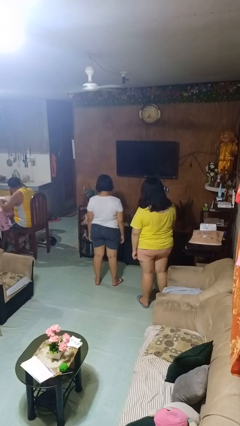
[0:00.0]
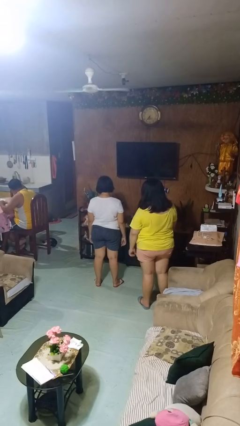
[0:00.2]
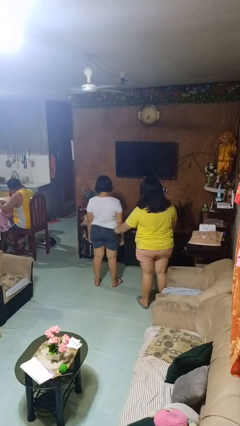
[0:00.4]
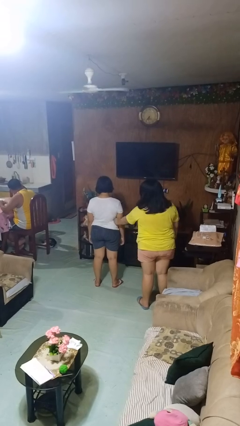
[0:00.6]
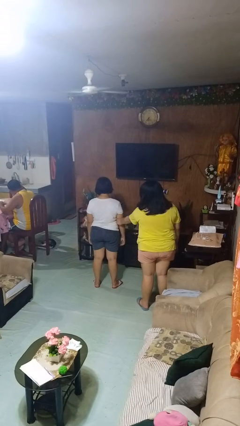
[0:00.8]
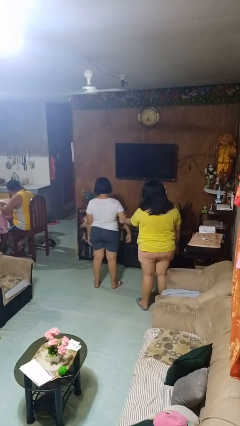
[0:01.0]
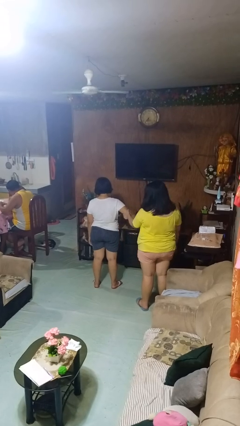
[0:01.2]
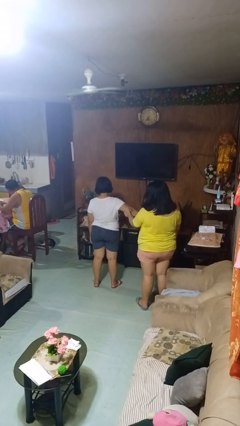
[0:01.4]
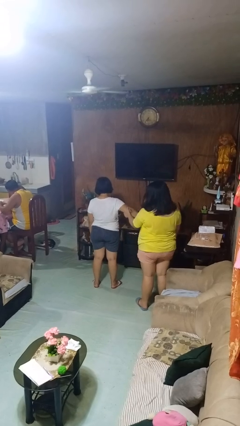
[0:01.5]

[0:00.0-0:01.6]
person grabs person by bicep

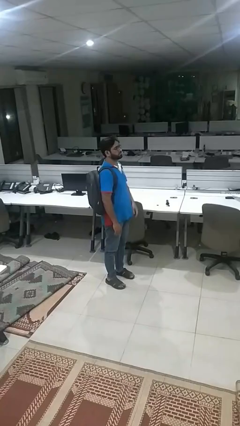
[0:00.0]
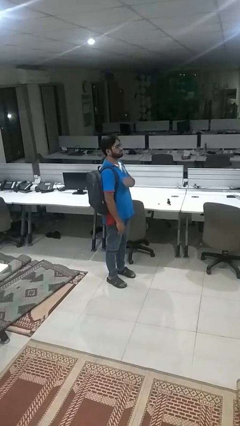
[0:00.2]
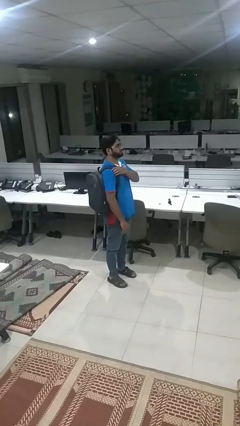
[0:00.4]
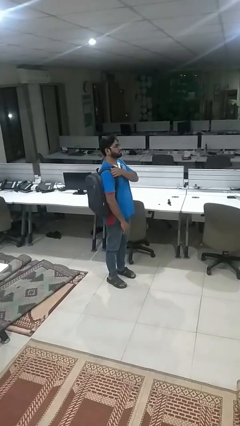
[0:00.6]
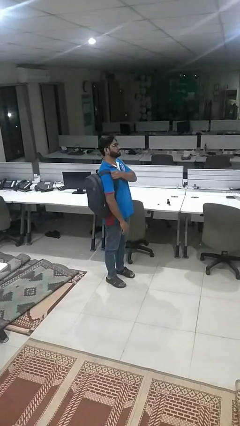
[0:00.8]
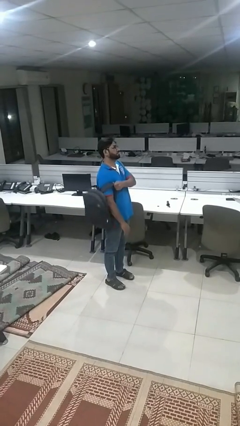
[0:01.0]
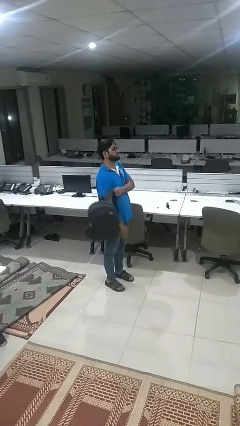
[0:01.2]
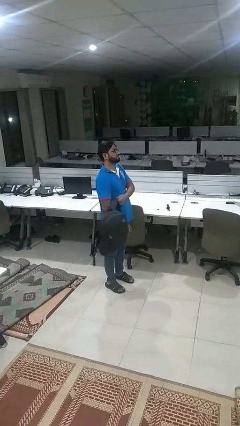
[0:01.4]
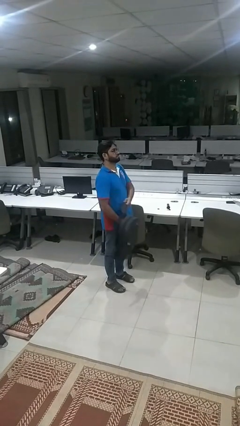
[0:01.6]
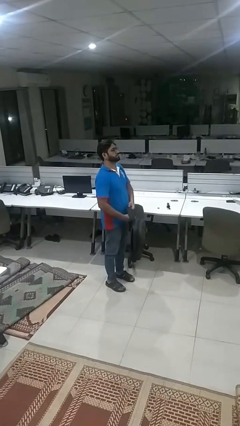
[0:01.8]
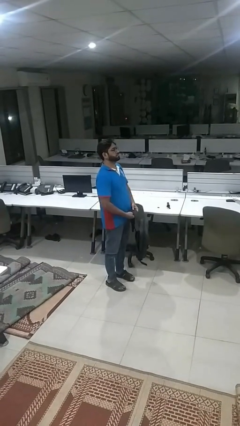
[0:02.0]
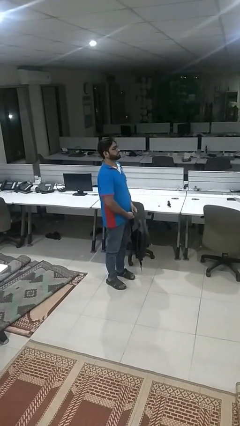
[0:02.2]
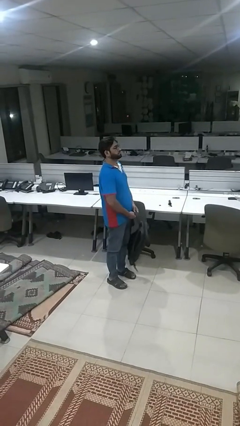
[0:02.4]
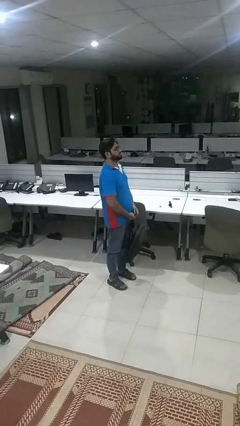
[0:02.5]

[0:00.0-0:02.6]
person takes off backpack

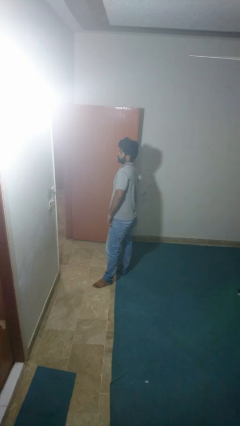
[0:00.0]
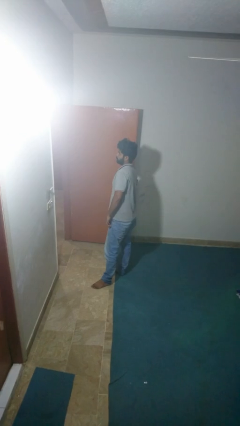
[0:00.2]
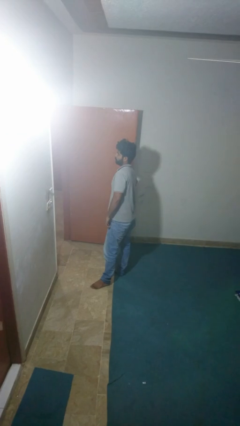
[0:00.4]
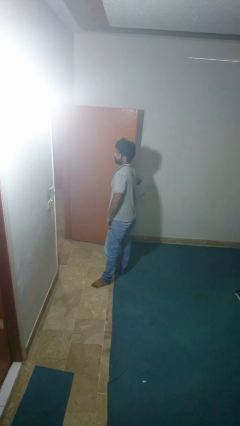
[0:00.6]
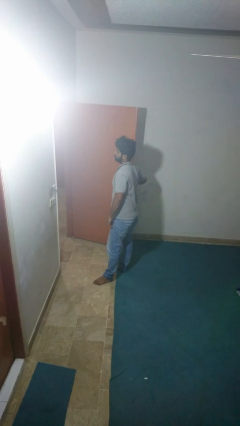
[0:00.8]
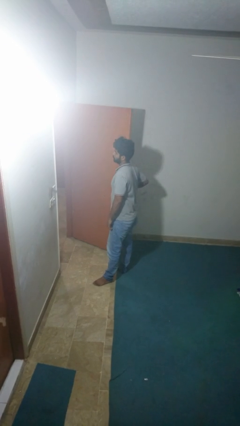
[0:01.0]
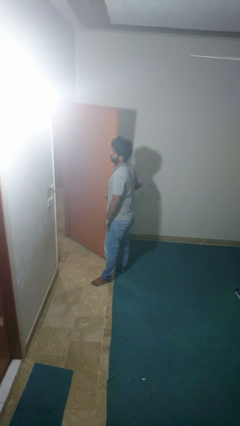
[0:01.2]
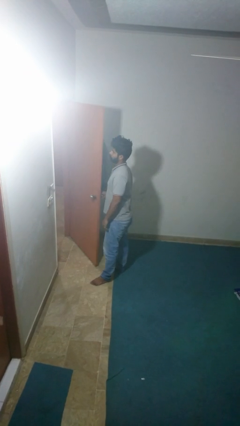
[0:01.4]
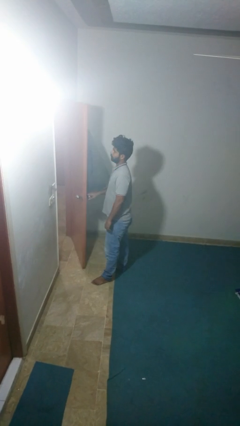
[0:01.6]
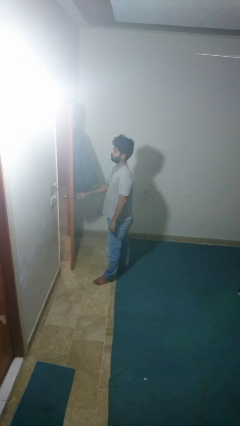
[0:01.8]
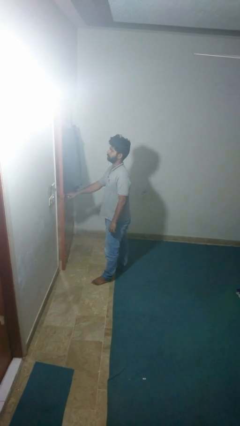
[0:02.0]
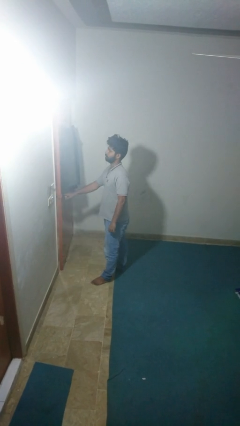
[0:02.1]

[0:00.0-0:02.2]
person closes facility door

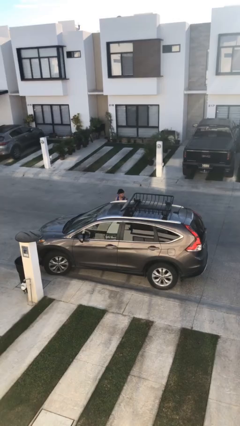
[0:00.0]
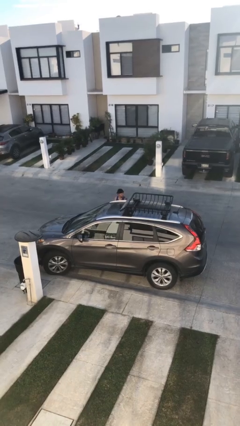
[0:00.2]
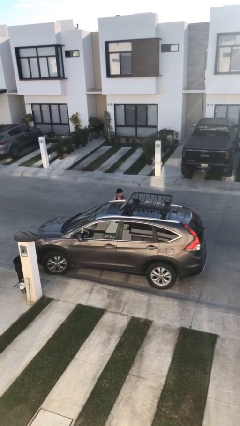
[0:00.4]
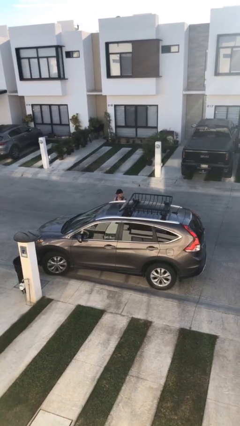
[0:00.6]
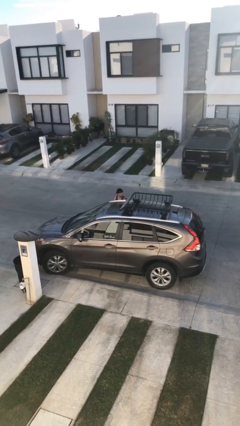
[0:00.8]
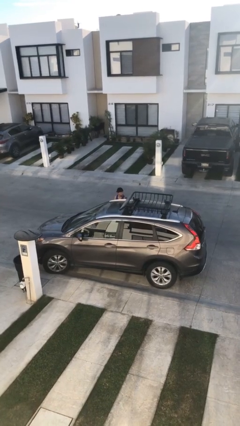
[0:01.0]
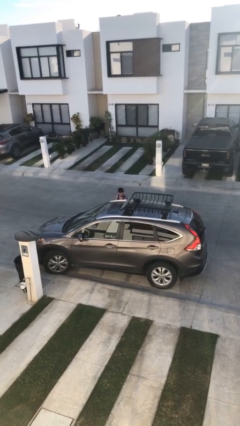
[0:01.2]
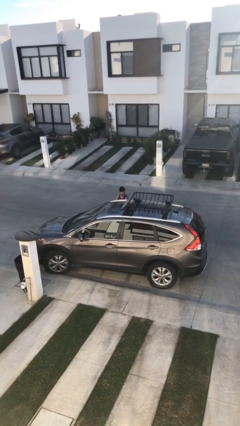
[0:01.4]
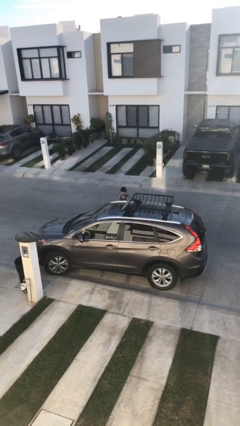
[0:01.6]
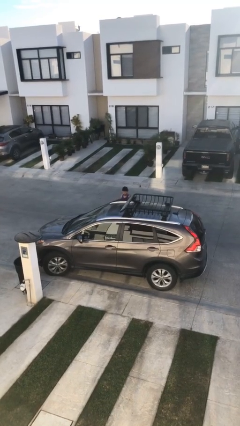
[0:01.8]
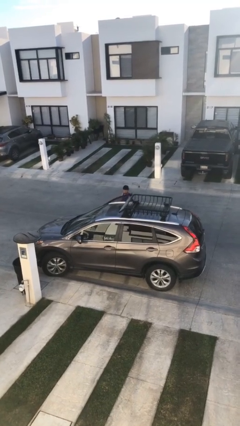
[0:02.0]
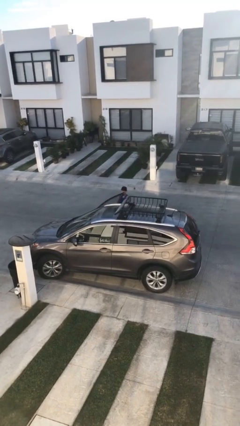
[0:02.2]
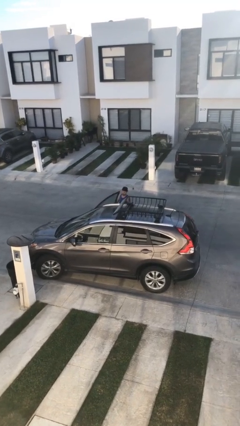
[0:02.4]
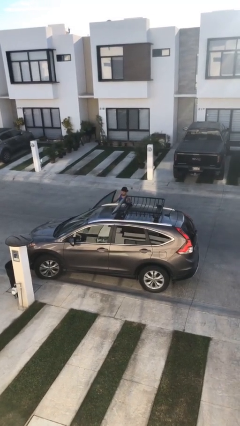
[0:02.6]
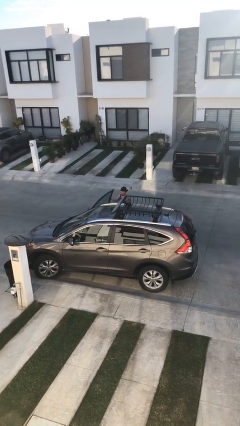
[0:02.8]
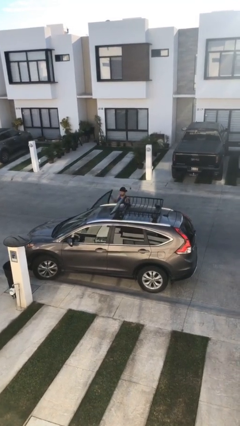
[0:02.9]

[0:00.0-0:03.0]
person opens car door

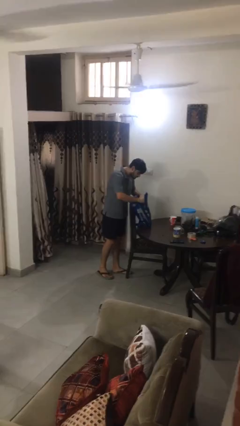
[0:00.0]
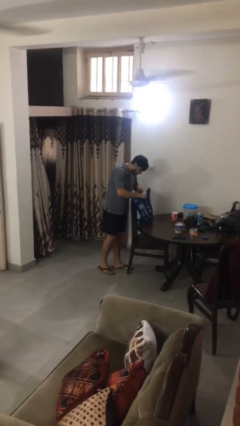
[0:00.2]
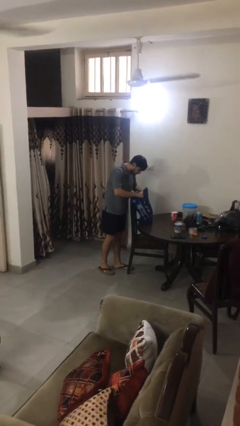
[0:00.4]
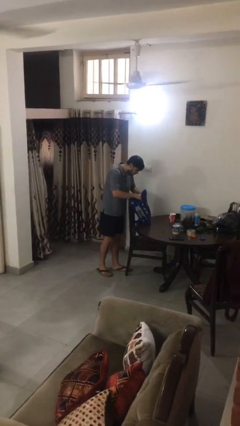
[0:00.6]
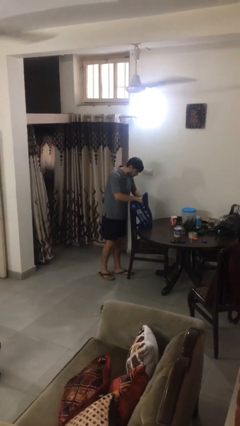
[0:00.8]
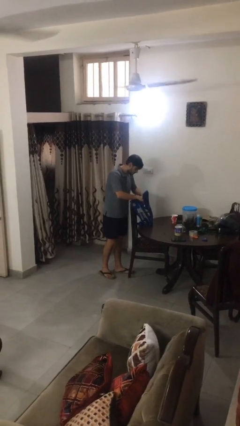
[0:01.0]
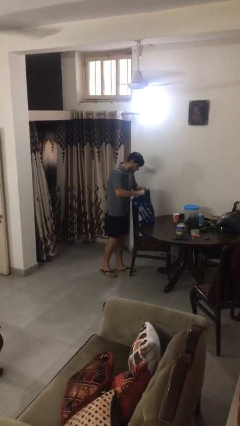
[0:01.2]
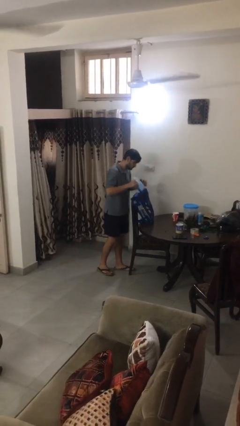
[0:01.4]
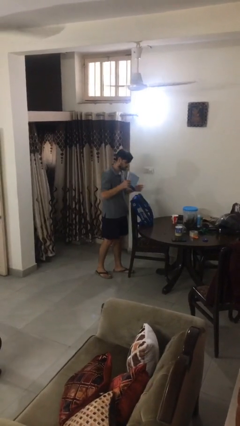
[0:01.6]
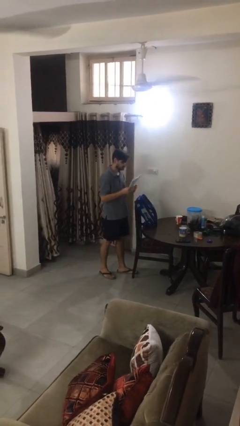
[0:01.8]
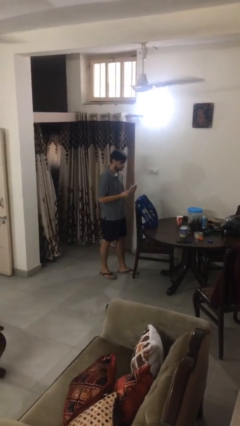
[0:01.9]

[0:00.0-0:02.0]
person takes object from backpack

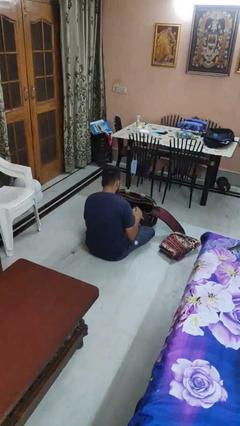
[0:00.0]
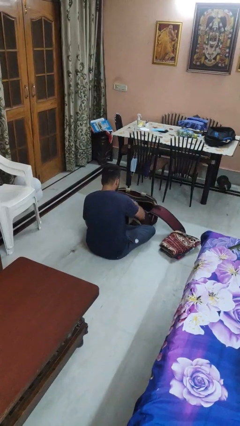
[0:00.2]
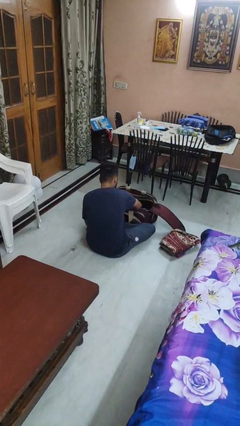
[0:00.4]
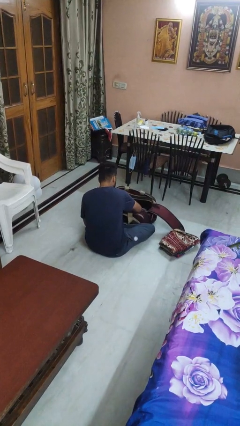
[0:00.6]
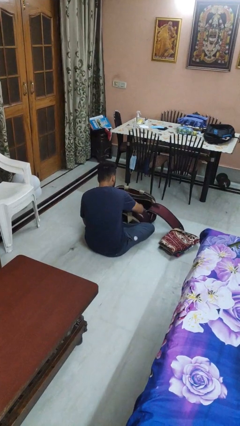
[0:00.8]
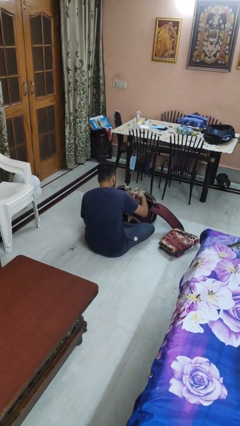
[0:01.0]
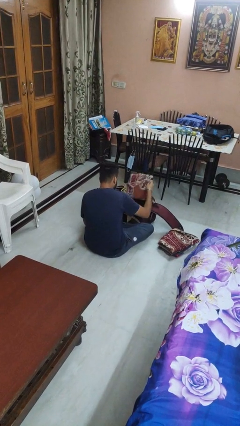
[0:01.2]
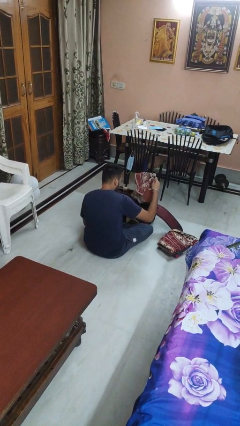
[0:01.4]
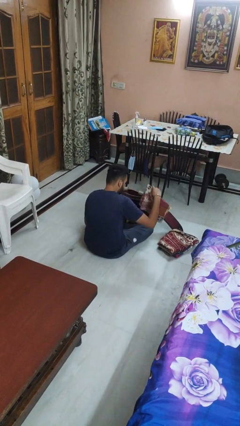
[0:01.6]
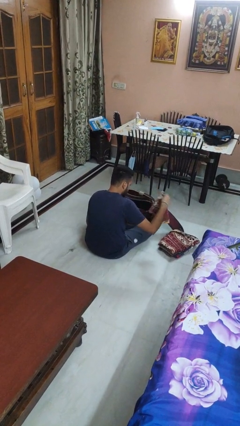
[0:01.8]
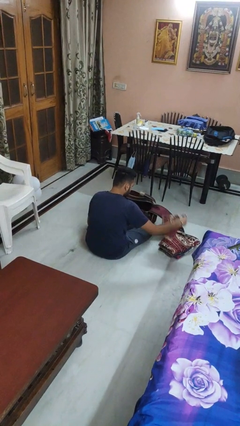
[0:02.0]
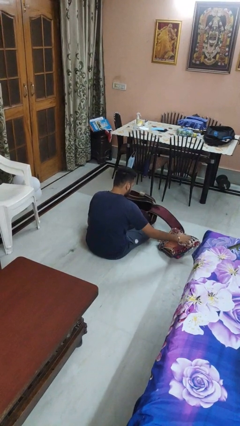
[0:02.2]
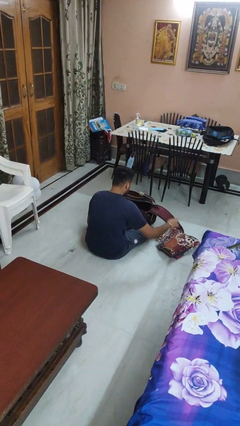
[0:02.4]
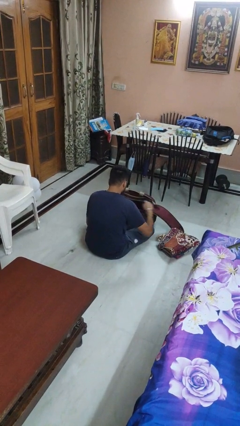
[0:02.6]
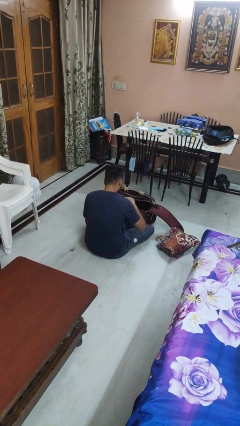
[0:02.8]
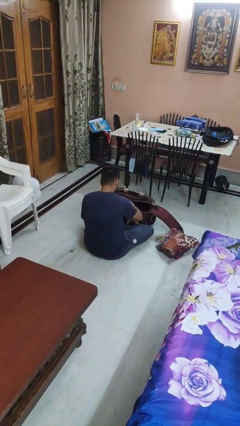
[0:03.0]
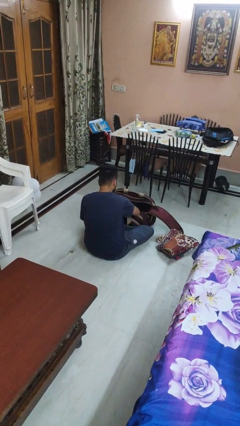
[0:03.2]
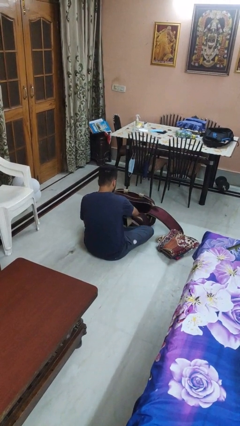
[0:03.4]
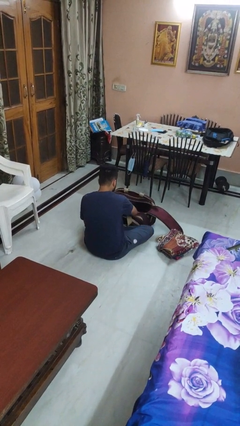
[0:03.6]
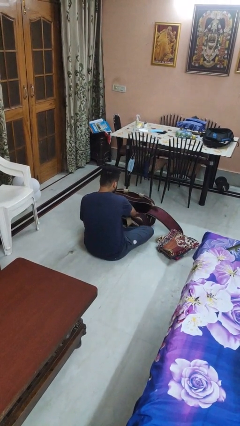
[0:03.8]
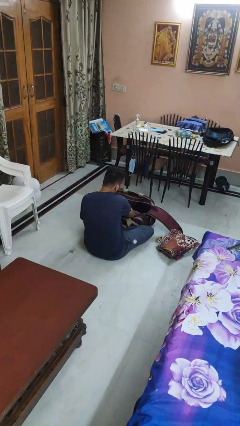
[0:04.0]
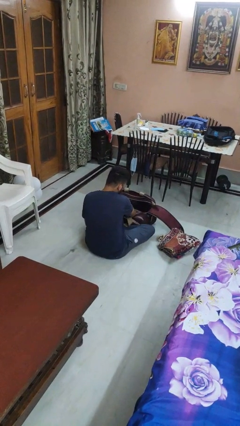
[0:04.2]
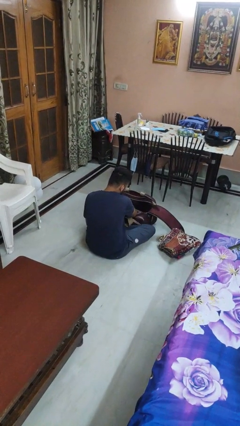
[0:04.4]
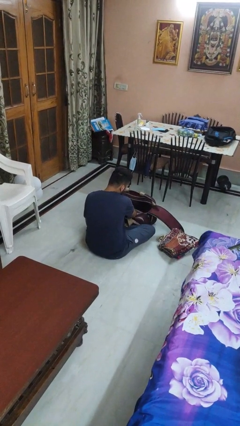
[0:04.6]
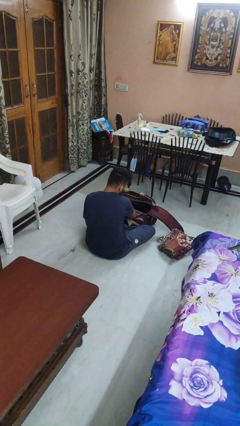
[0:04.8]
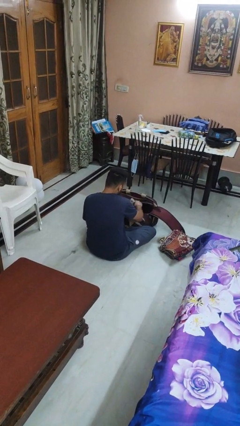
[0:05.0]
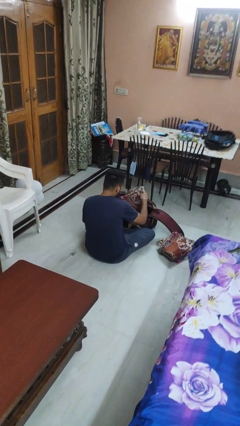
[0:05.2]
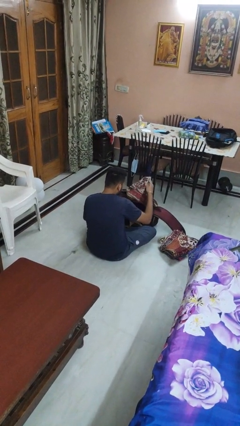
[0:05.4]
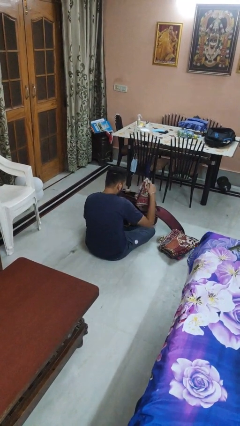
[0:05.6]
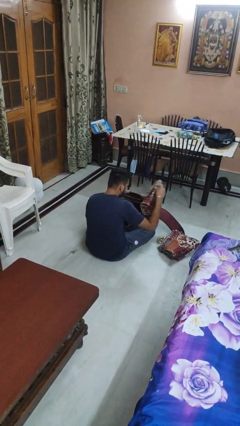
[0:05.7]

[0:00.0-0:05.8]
person arranges flowers in vase
